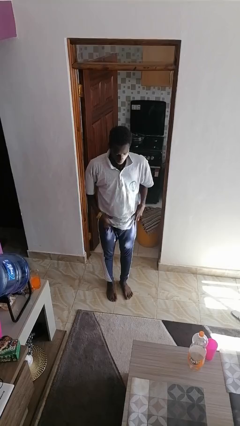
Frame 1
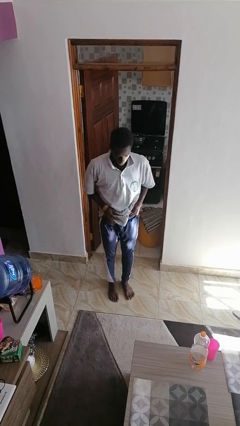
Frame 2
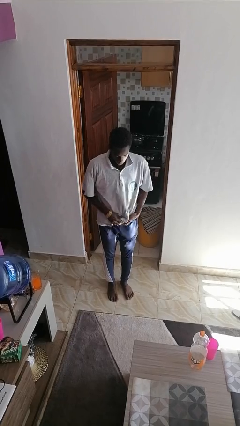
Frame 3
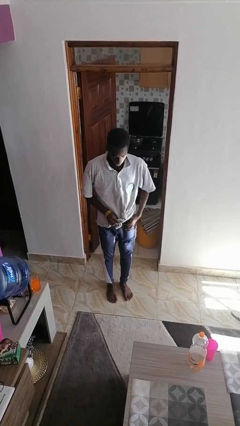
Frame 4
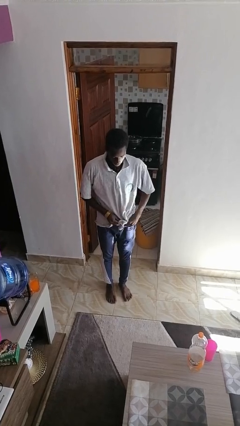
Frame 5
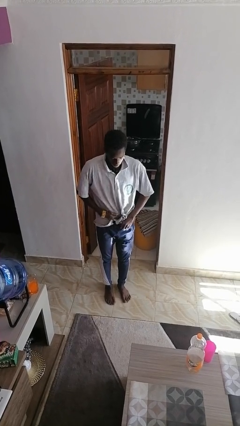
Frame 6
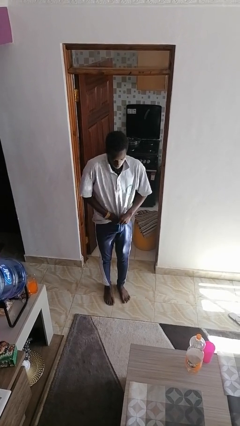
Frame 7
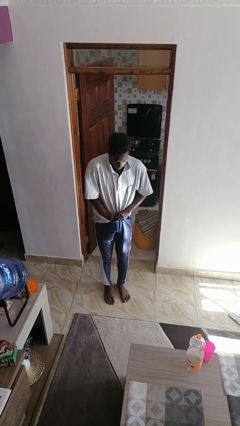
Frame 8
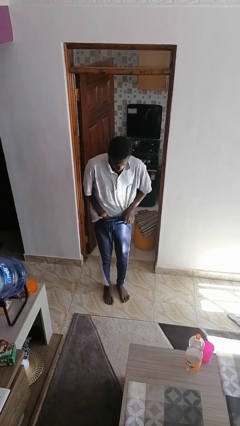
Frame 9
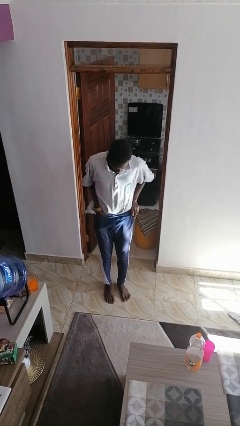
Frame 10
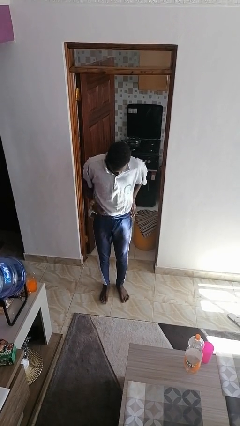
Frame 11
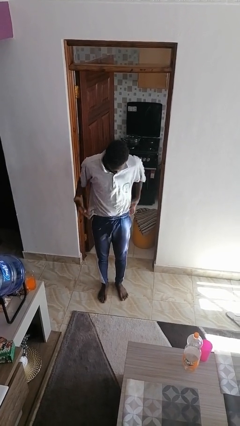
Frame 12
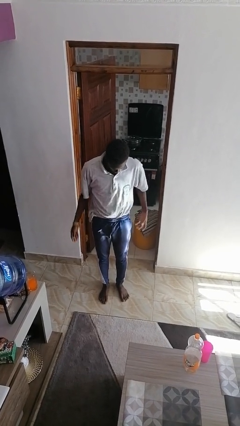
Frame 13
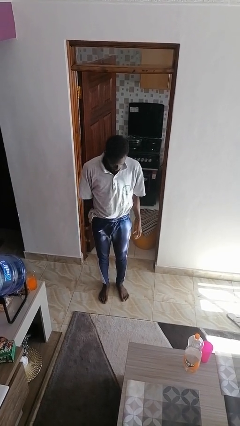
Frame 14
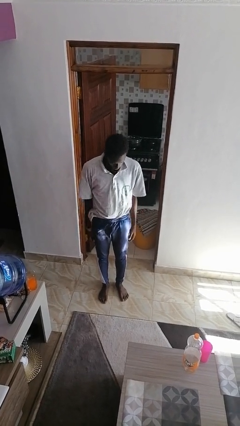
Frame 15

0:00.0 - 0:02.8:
person tucks in shirt

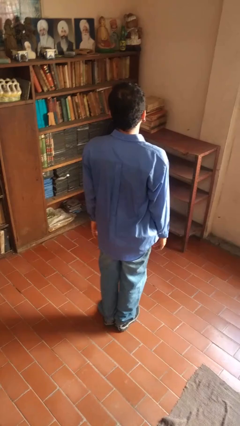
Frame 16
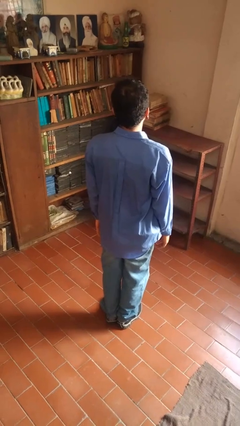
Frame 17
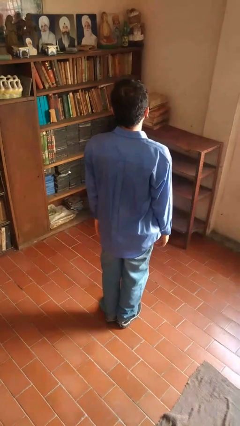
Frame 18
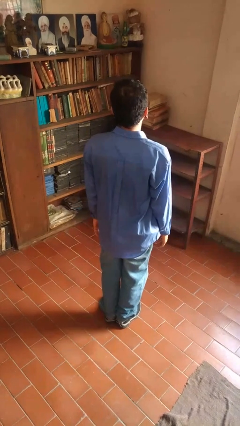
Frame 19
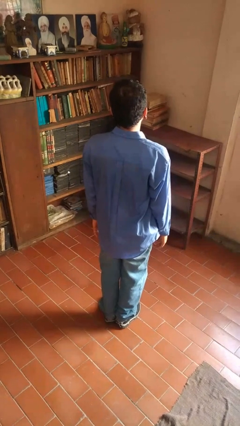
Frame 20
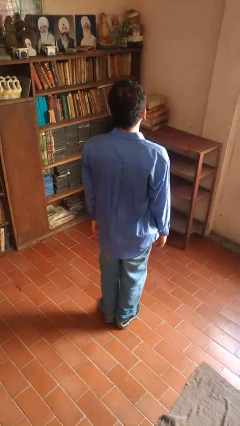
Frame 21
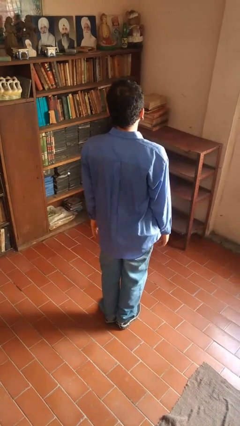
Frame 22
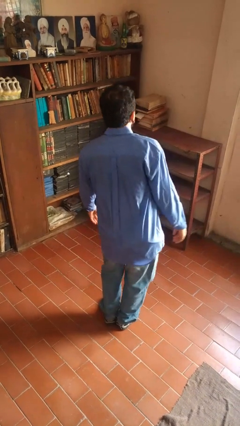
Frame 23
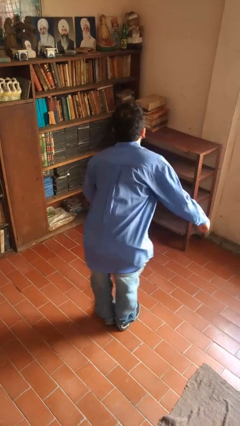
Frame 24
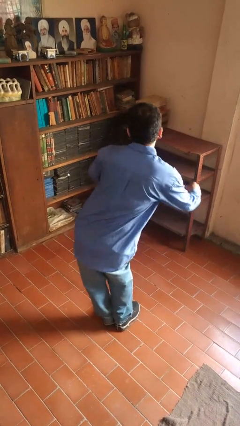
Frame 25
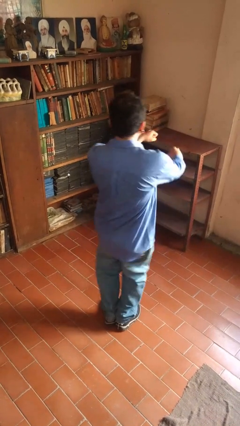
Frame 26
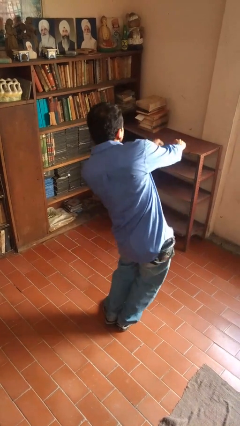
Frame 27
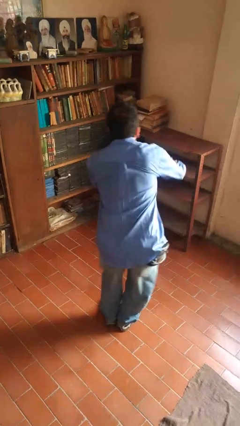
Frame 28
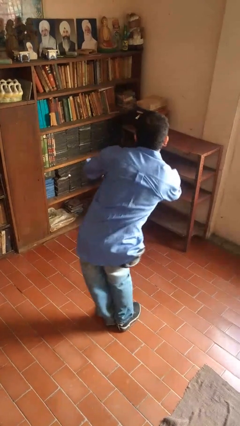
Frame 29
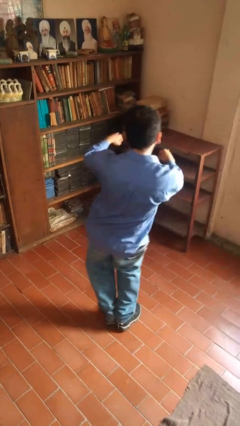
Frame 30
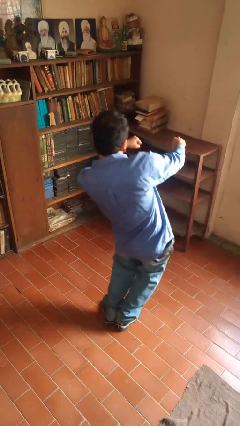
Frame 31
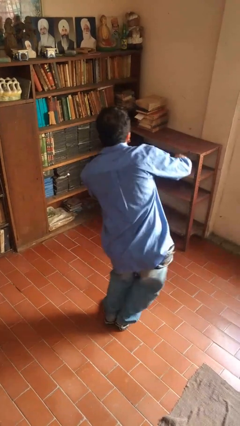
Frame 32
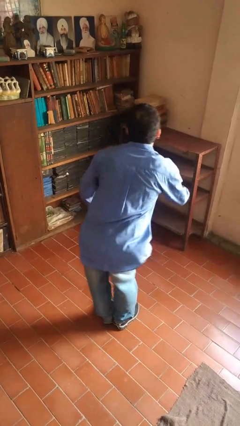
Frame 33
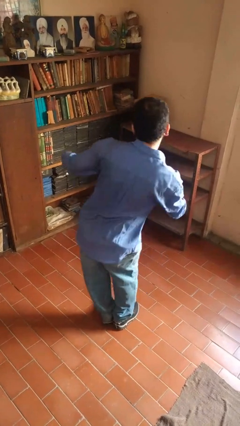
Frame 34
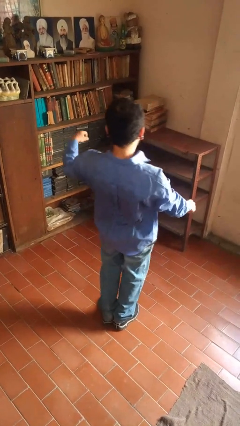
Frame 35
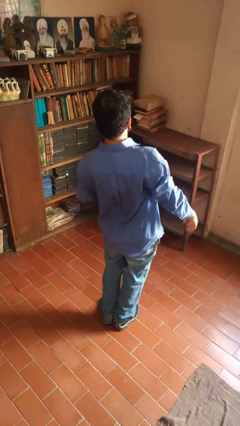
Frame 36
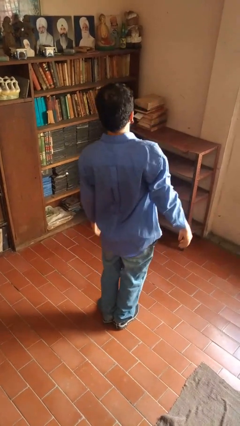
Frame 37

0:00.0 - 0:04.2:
person wiggles hips

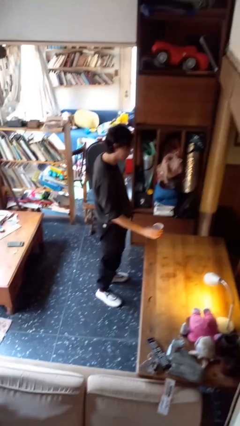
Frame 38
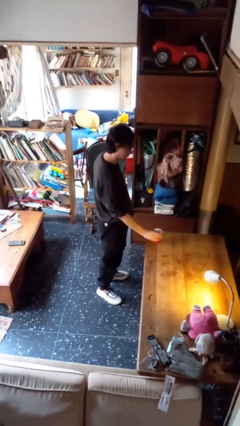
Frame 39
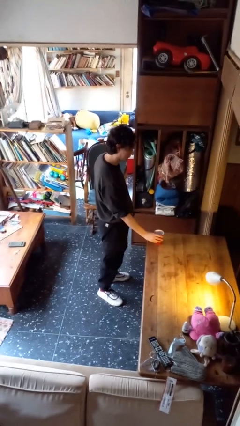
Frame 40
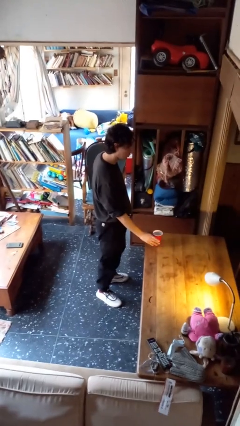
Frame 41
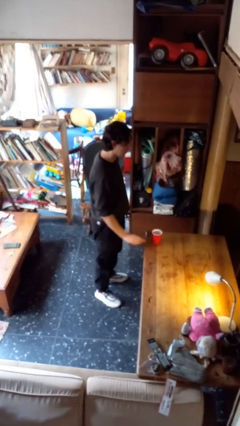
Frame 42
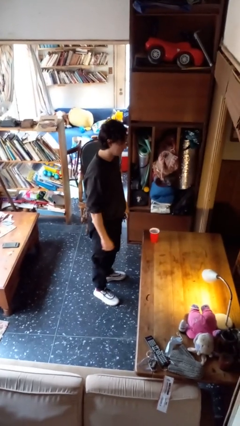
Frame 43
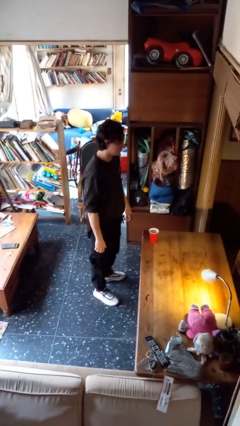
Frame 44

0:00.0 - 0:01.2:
person sets upright glass

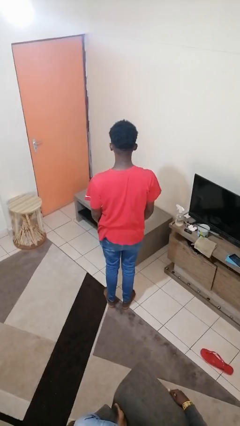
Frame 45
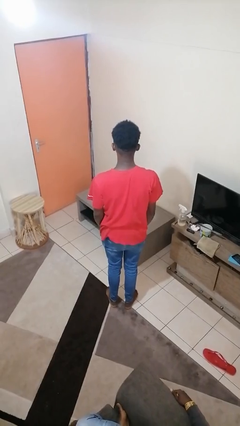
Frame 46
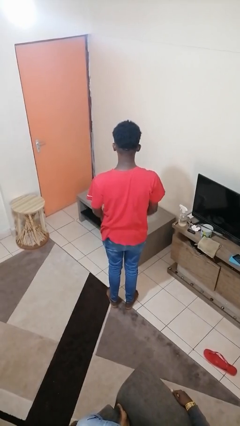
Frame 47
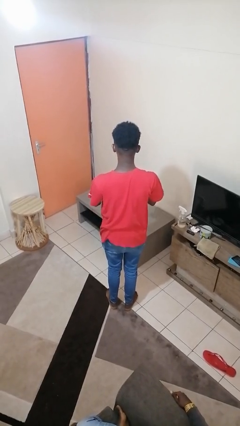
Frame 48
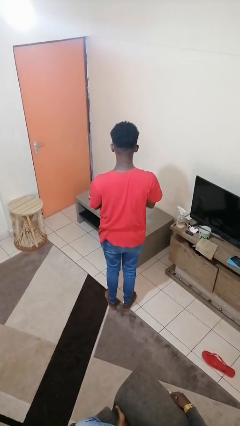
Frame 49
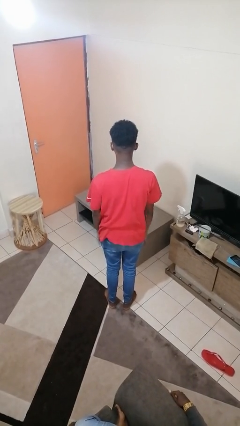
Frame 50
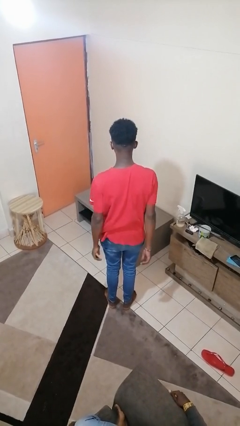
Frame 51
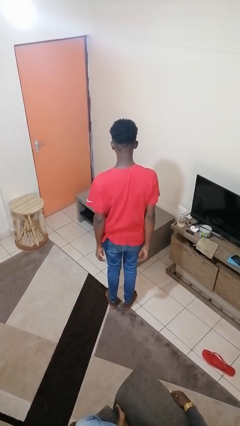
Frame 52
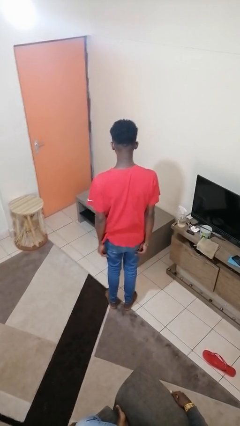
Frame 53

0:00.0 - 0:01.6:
person throws object on table

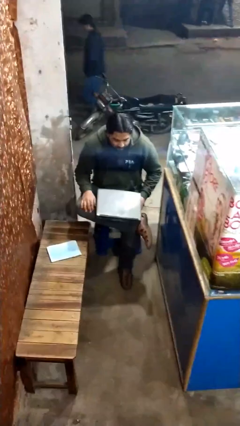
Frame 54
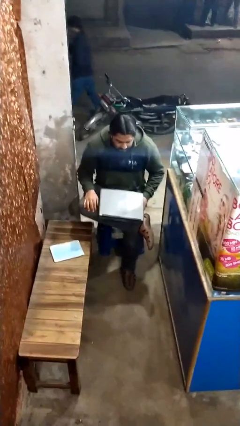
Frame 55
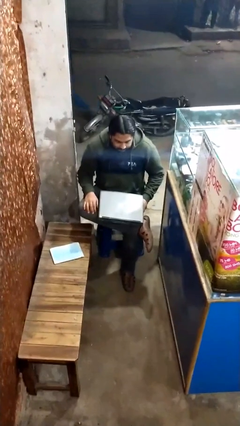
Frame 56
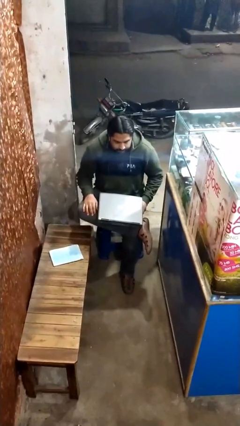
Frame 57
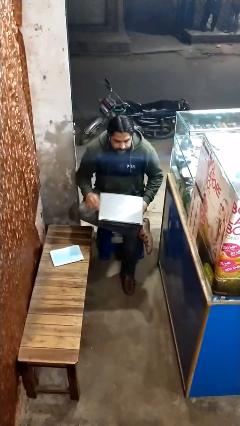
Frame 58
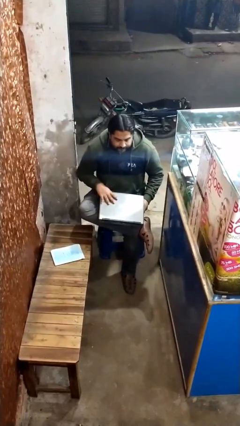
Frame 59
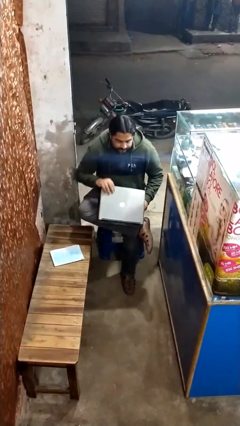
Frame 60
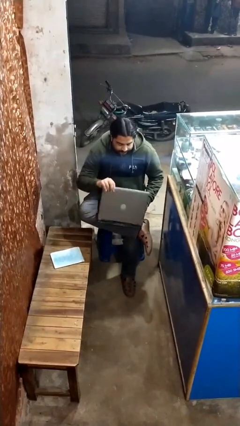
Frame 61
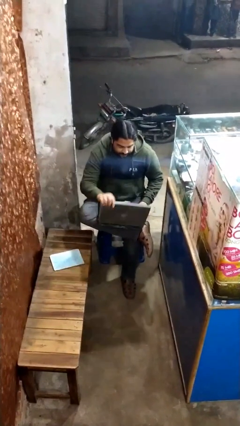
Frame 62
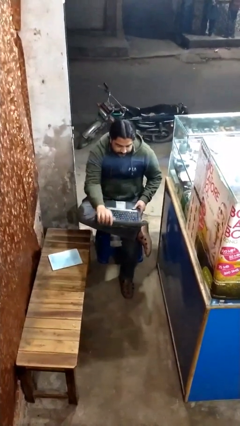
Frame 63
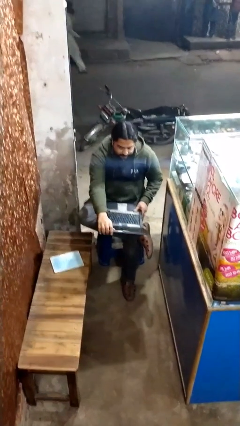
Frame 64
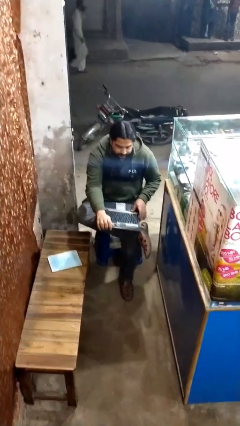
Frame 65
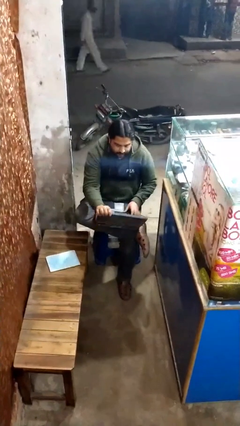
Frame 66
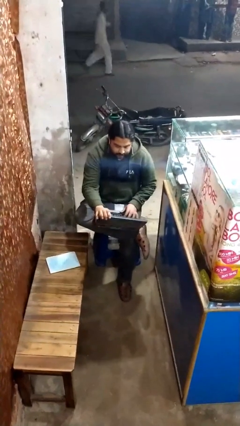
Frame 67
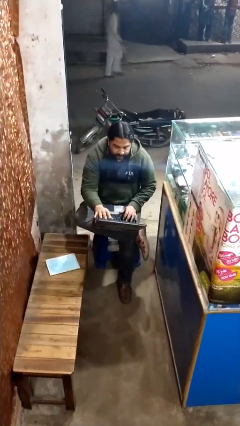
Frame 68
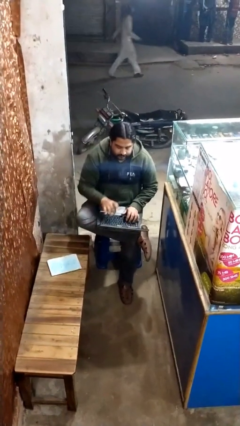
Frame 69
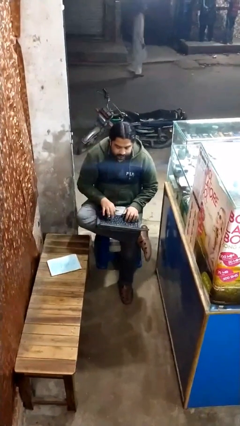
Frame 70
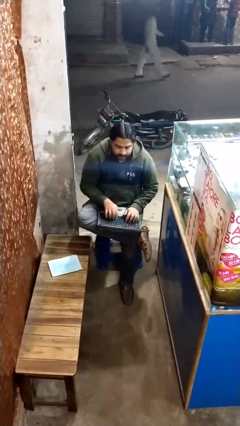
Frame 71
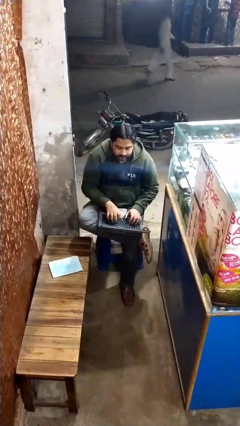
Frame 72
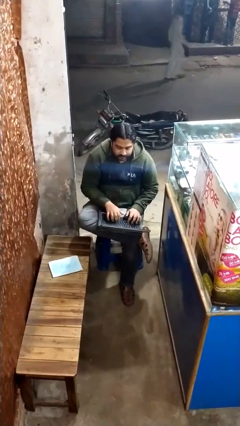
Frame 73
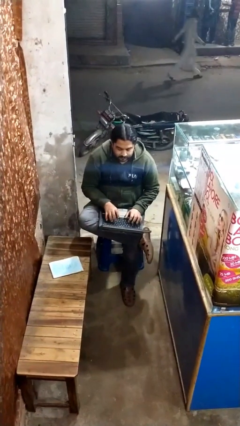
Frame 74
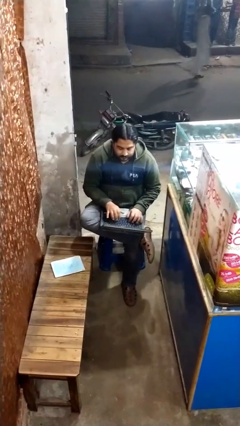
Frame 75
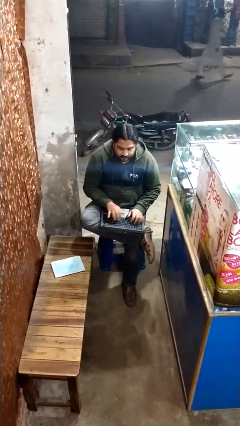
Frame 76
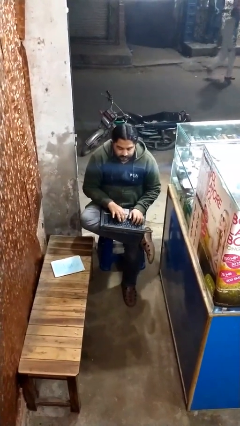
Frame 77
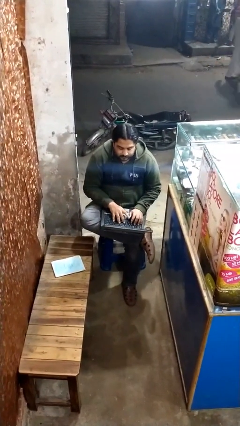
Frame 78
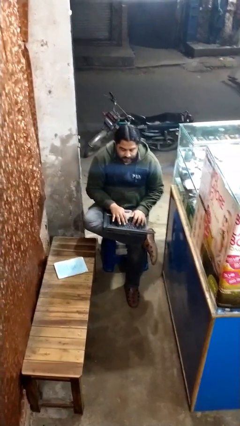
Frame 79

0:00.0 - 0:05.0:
person interacts with laptop

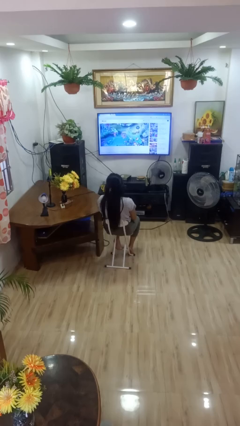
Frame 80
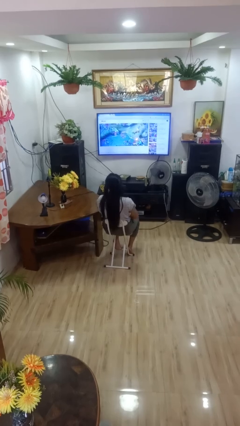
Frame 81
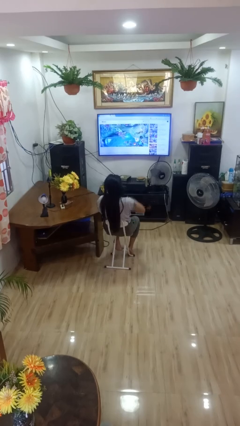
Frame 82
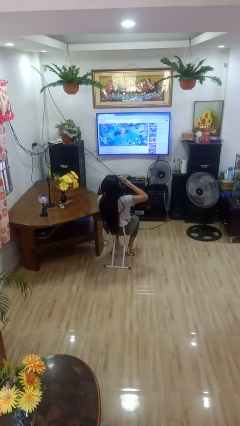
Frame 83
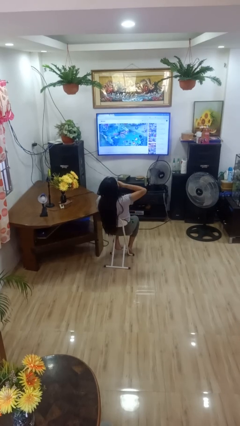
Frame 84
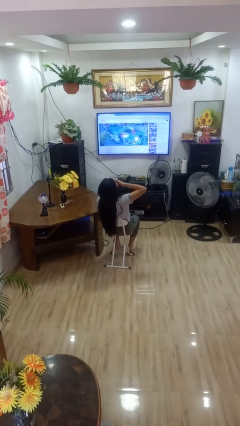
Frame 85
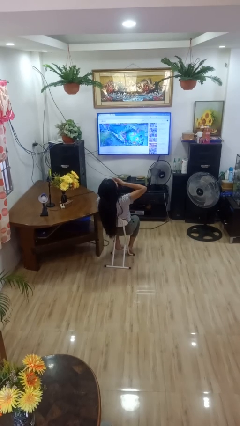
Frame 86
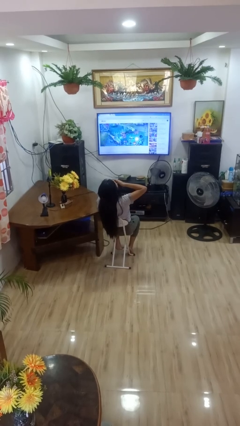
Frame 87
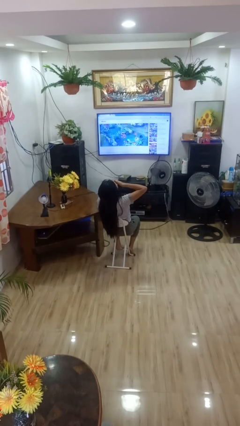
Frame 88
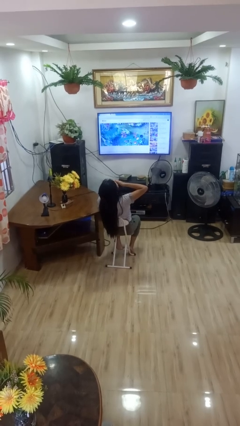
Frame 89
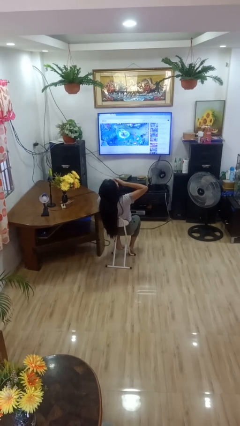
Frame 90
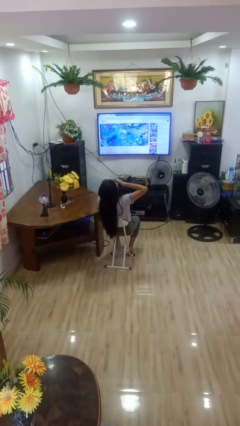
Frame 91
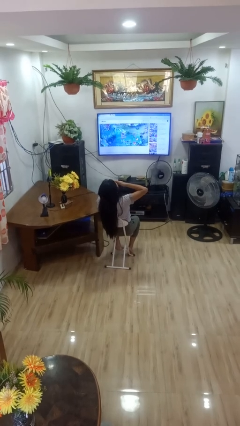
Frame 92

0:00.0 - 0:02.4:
person yawns

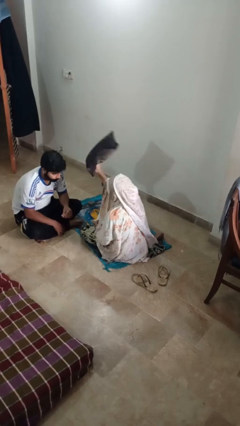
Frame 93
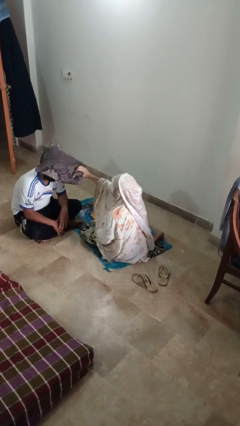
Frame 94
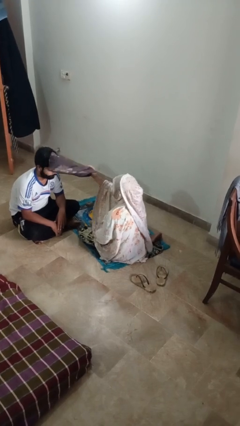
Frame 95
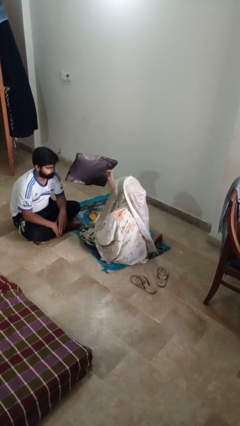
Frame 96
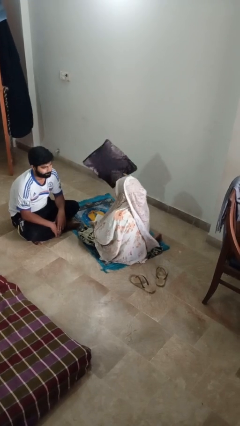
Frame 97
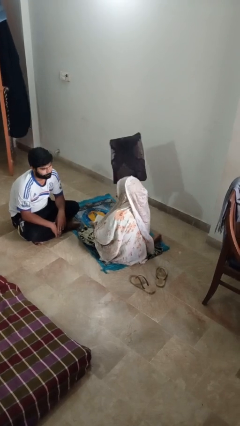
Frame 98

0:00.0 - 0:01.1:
person hits person with pillow
